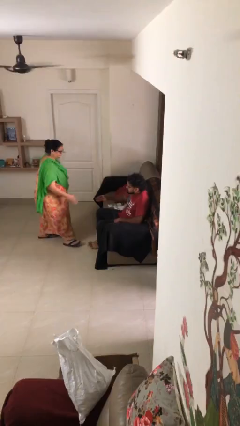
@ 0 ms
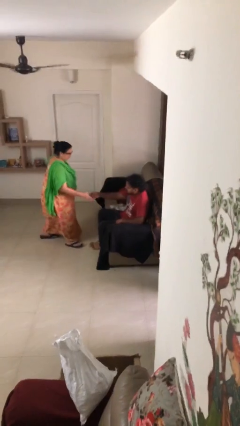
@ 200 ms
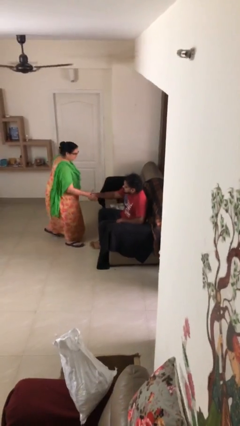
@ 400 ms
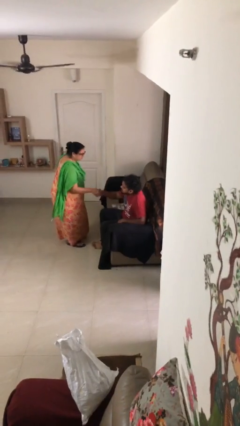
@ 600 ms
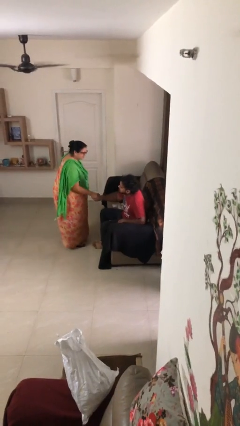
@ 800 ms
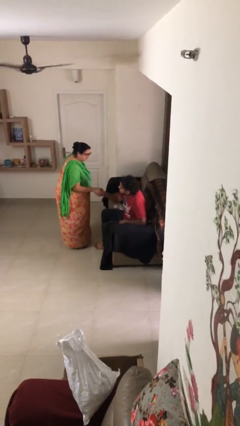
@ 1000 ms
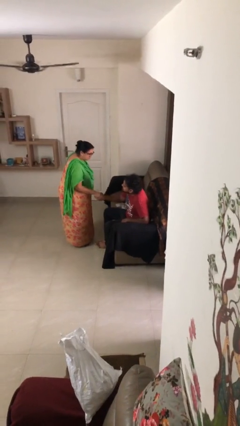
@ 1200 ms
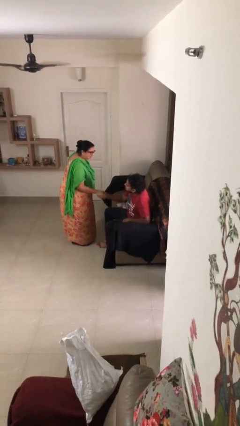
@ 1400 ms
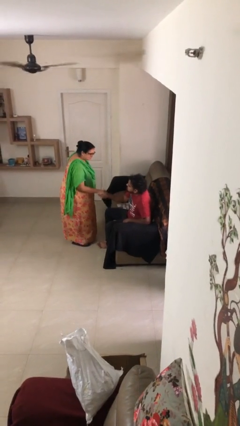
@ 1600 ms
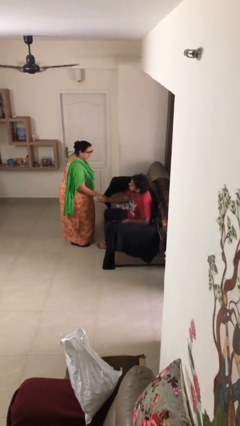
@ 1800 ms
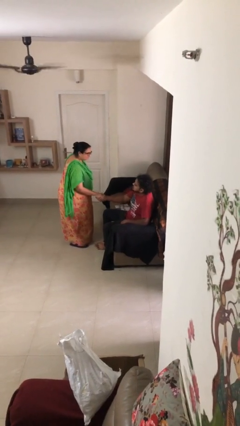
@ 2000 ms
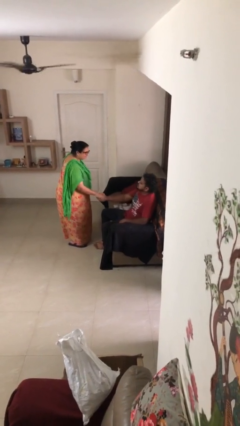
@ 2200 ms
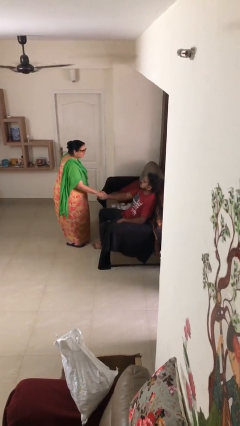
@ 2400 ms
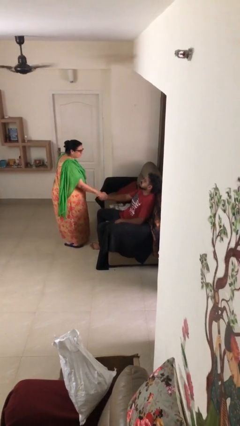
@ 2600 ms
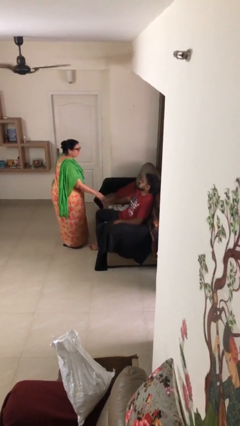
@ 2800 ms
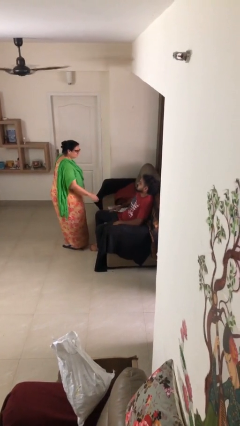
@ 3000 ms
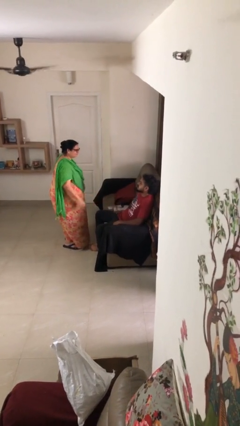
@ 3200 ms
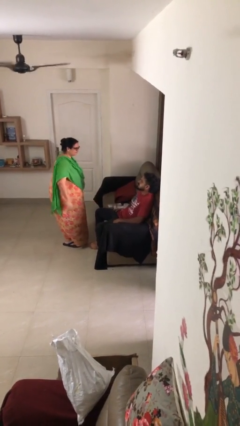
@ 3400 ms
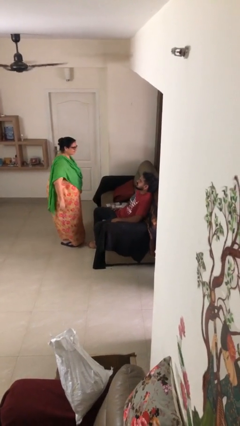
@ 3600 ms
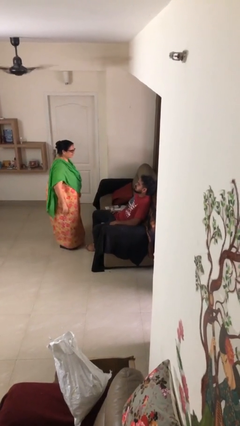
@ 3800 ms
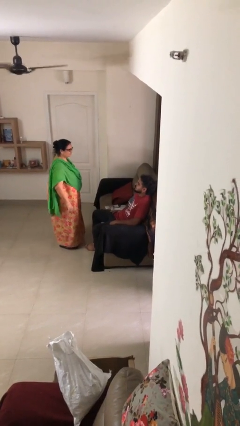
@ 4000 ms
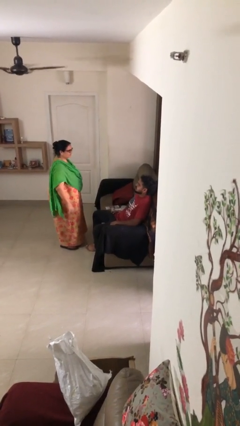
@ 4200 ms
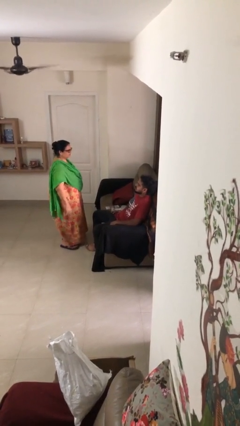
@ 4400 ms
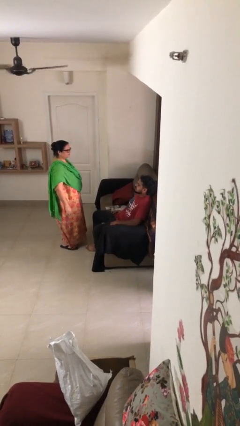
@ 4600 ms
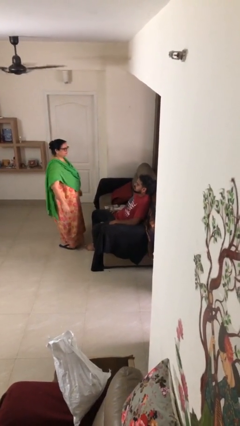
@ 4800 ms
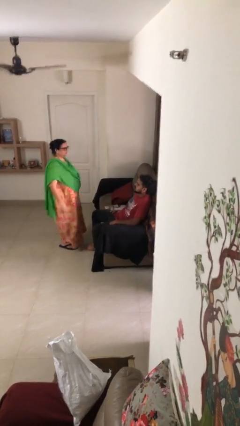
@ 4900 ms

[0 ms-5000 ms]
person shakes hand

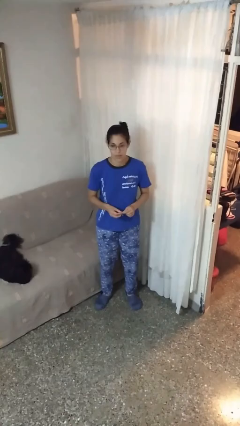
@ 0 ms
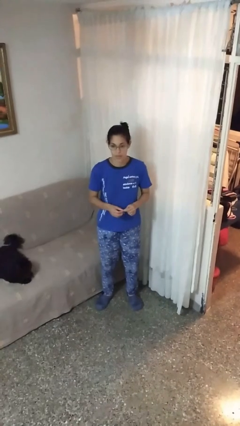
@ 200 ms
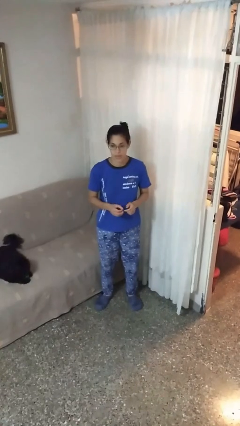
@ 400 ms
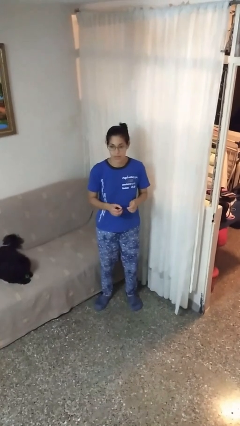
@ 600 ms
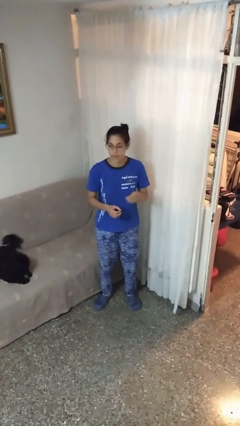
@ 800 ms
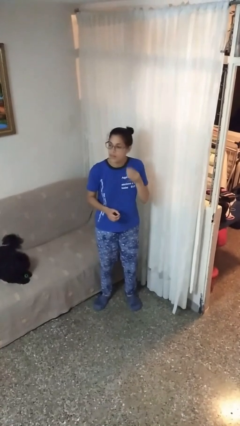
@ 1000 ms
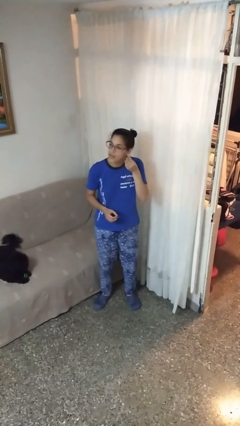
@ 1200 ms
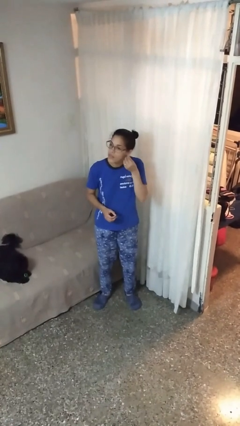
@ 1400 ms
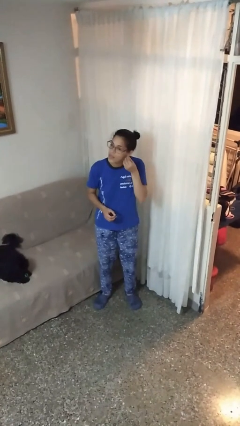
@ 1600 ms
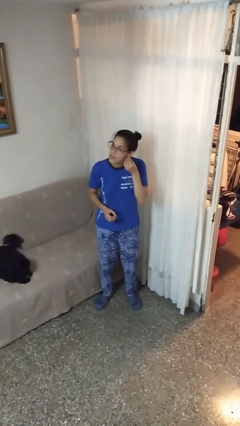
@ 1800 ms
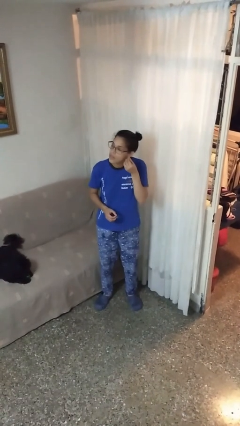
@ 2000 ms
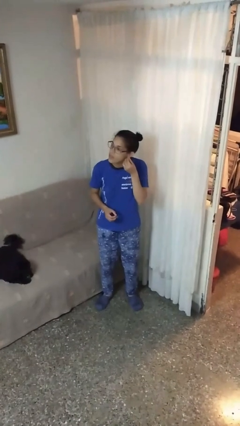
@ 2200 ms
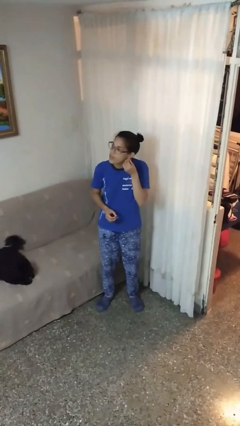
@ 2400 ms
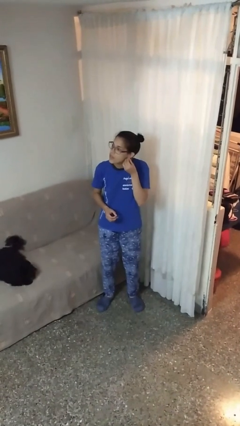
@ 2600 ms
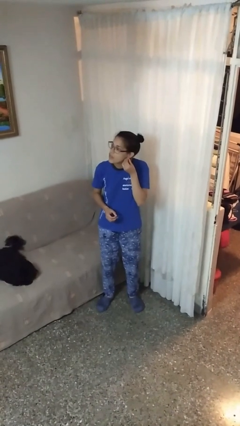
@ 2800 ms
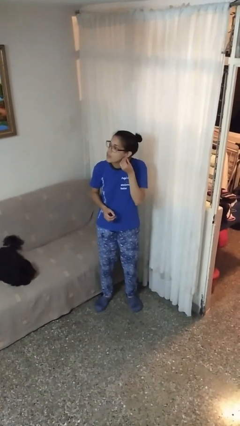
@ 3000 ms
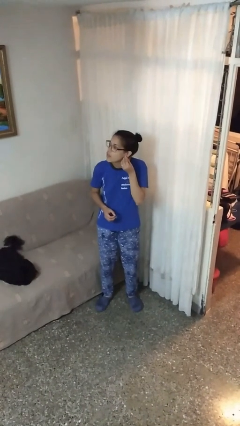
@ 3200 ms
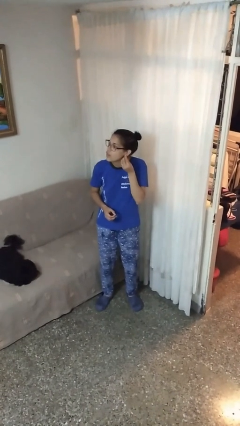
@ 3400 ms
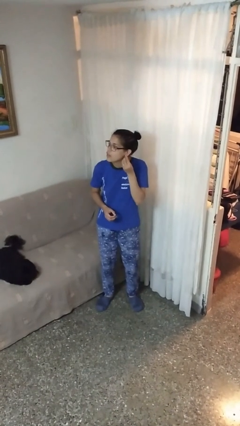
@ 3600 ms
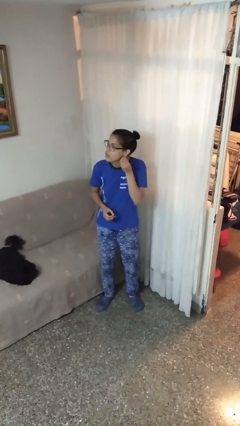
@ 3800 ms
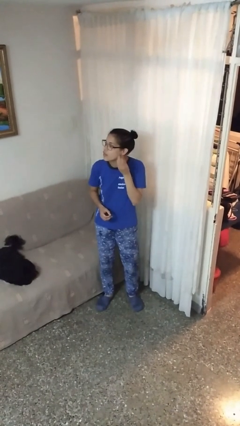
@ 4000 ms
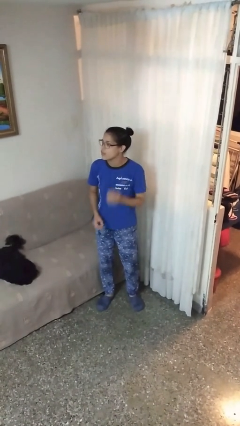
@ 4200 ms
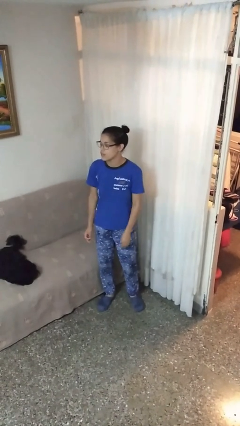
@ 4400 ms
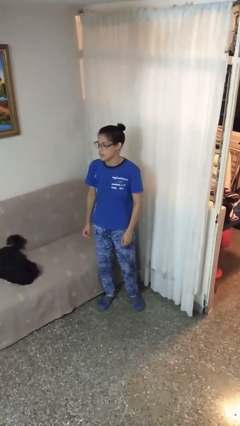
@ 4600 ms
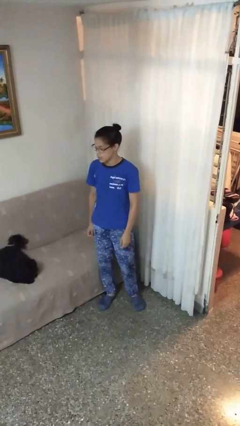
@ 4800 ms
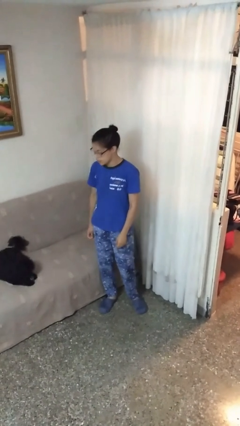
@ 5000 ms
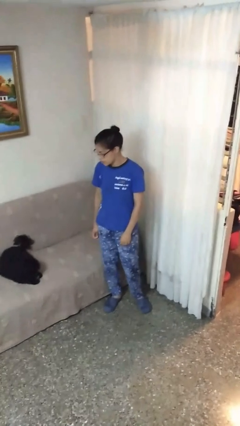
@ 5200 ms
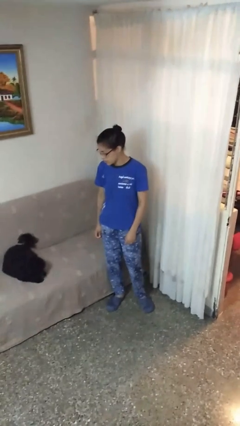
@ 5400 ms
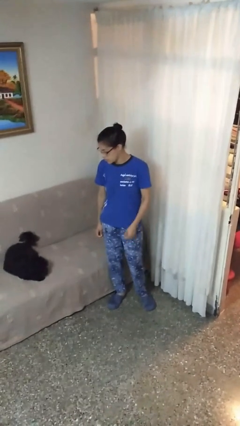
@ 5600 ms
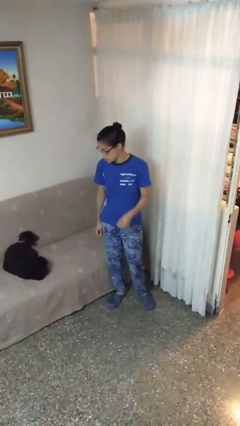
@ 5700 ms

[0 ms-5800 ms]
person puts on earrings

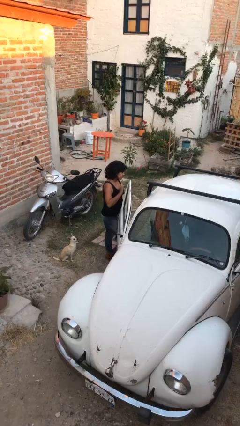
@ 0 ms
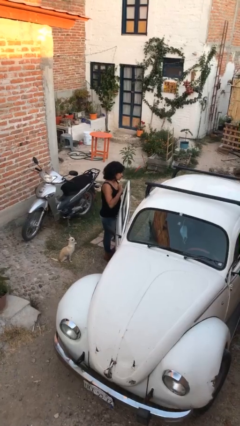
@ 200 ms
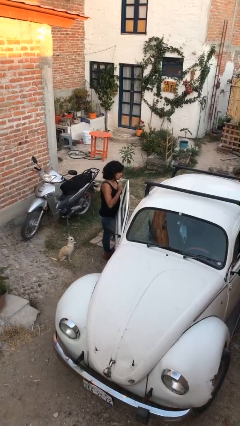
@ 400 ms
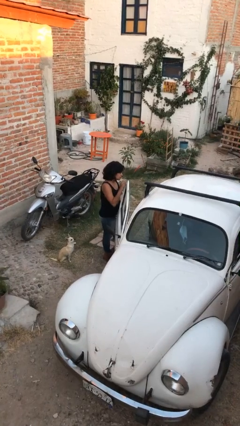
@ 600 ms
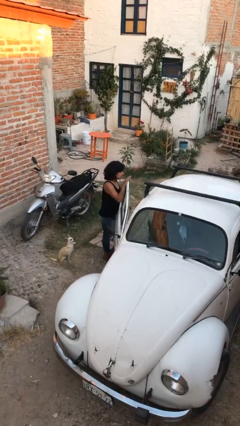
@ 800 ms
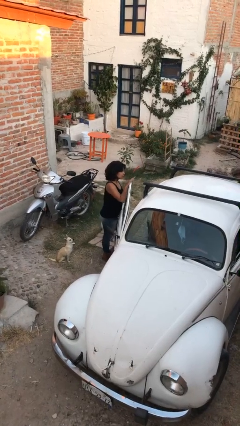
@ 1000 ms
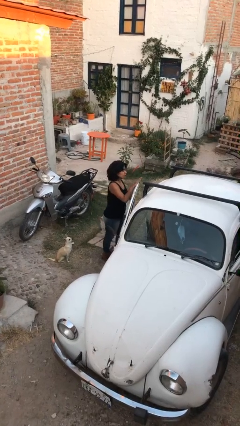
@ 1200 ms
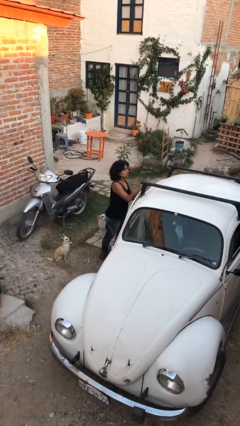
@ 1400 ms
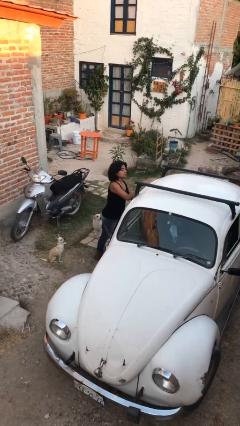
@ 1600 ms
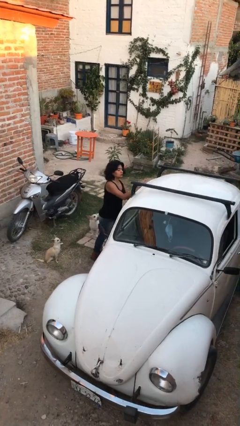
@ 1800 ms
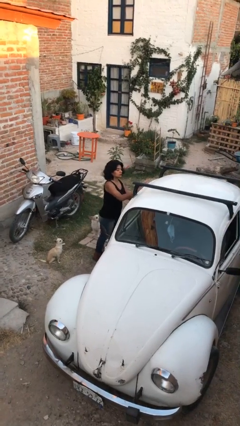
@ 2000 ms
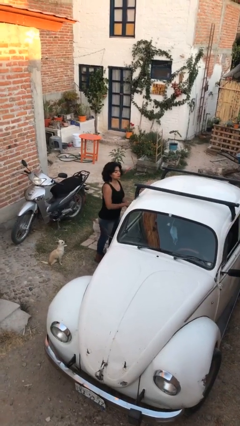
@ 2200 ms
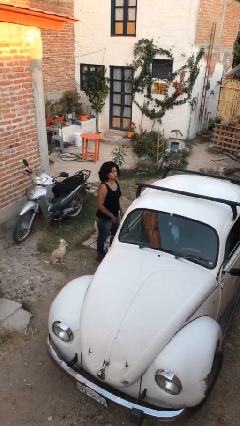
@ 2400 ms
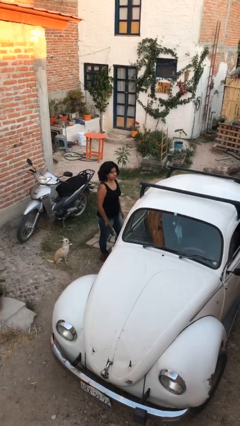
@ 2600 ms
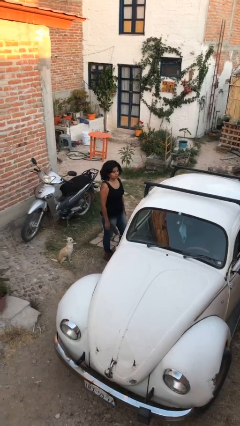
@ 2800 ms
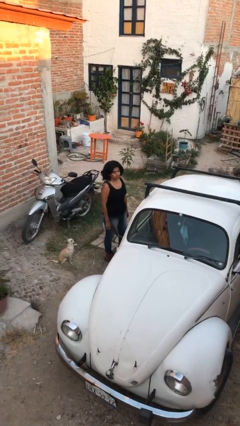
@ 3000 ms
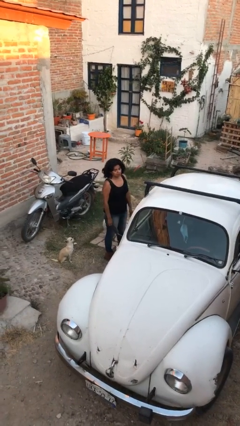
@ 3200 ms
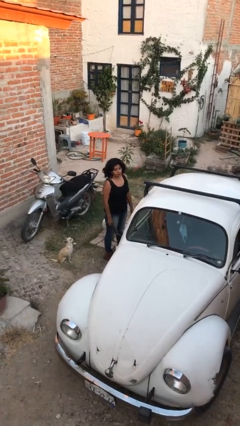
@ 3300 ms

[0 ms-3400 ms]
person closes car door

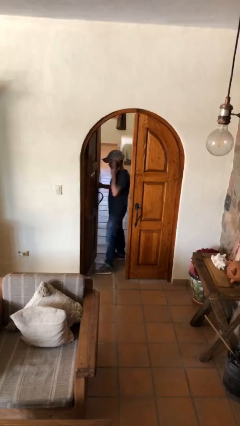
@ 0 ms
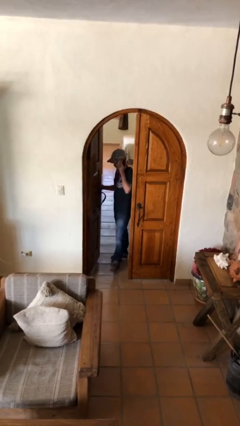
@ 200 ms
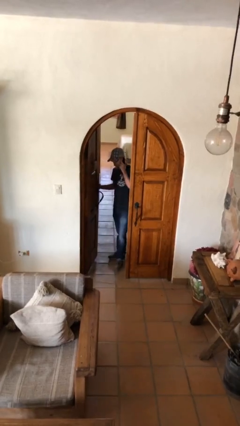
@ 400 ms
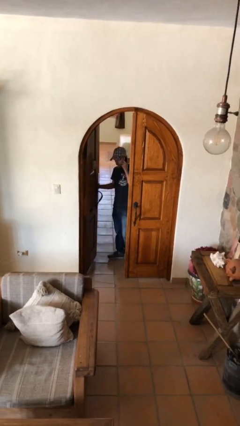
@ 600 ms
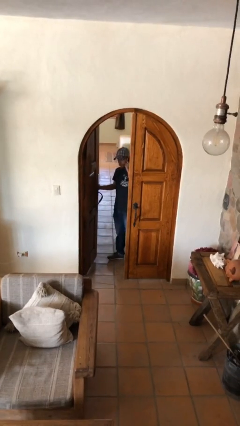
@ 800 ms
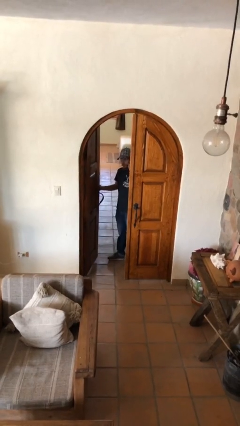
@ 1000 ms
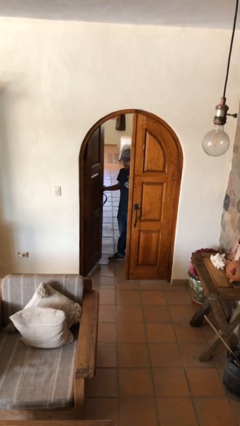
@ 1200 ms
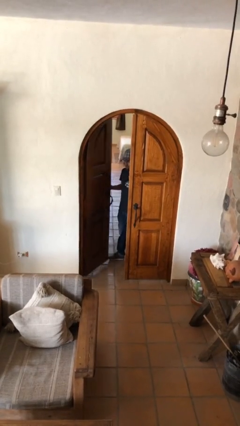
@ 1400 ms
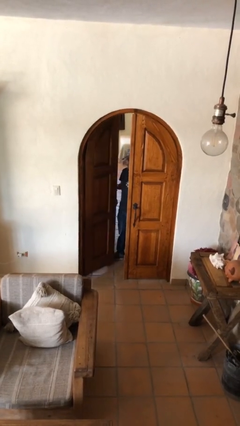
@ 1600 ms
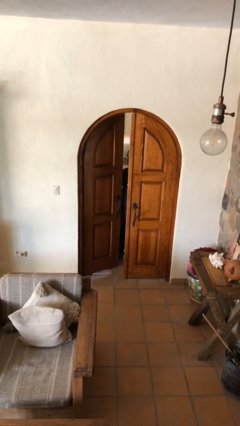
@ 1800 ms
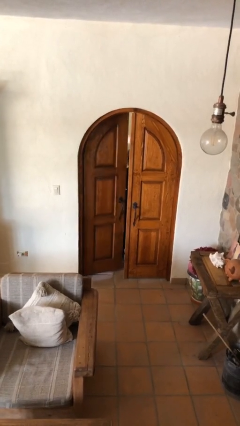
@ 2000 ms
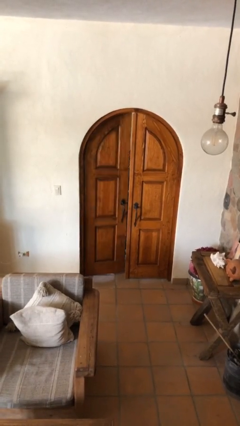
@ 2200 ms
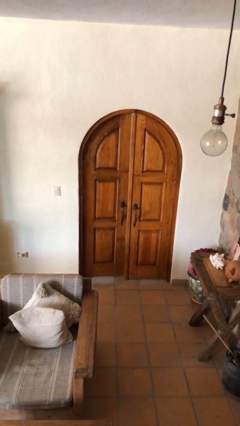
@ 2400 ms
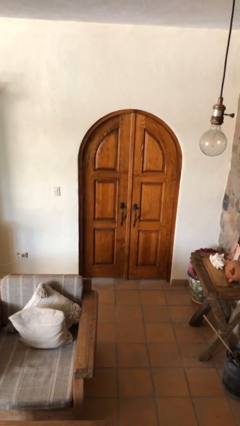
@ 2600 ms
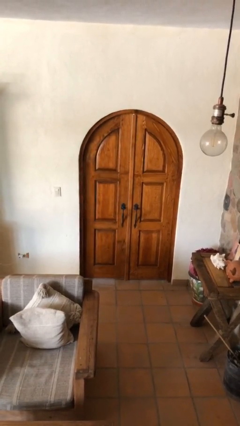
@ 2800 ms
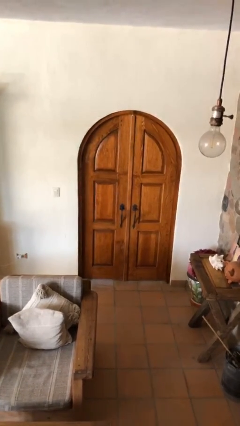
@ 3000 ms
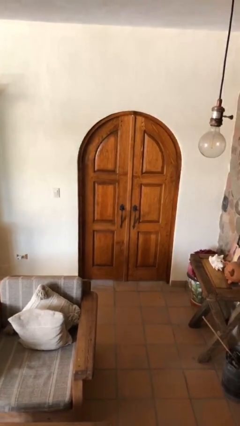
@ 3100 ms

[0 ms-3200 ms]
person closes facility door
